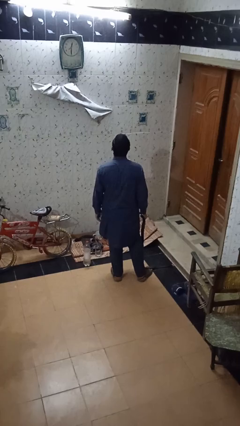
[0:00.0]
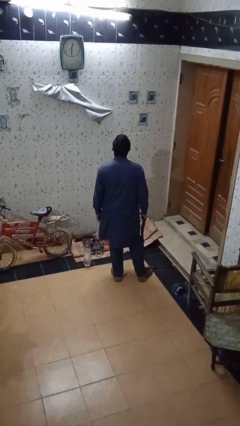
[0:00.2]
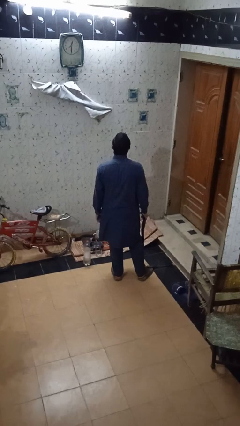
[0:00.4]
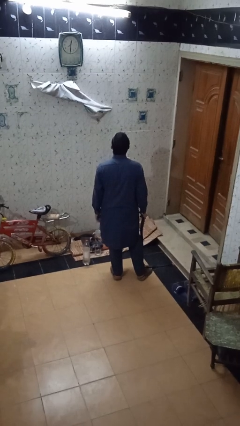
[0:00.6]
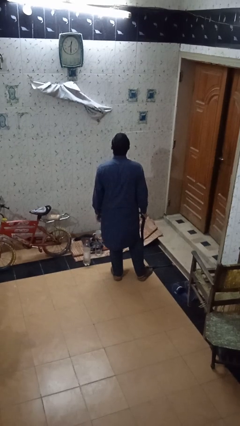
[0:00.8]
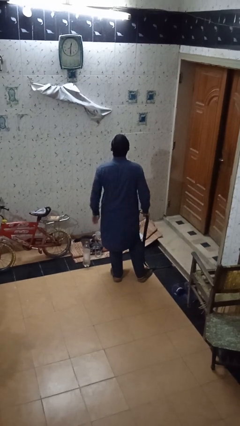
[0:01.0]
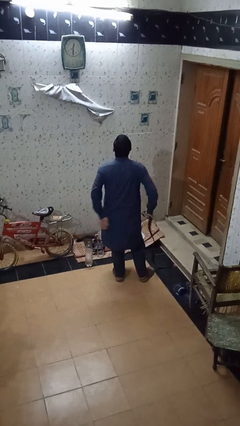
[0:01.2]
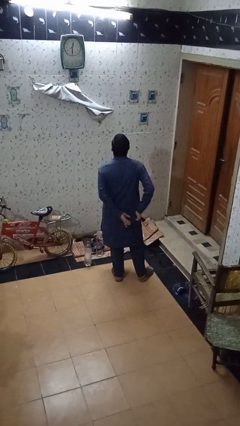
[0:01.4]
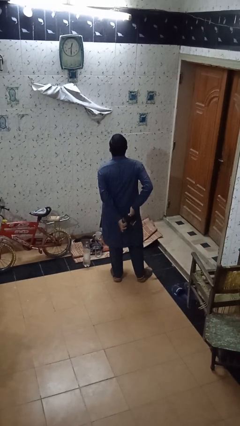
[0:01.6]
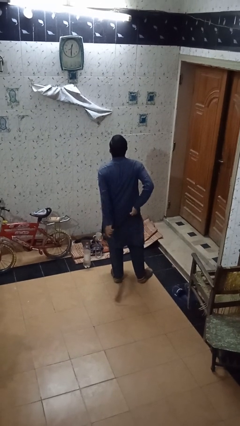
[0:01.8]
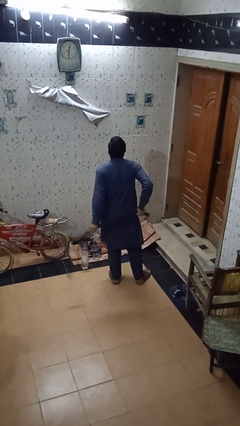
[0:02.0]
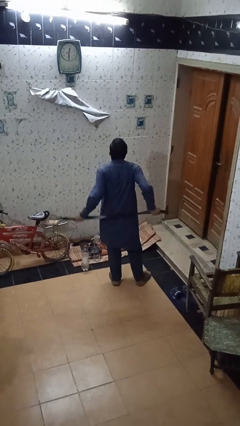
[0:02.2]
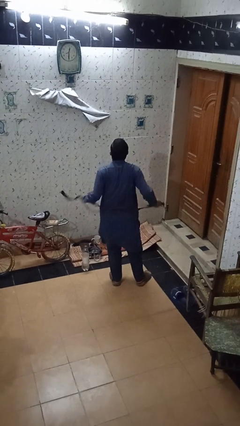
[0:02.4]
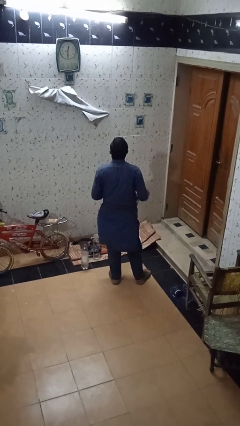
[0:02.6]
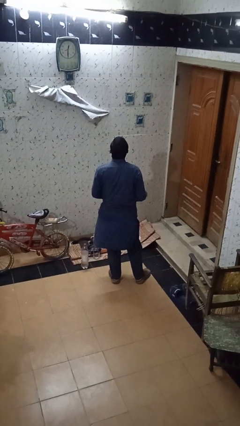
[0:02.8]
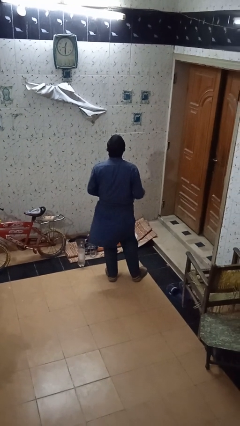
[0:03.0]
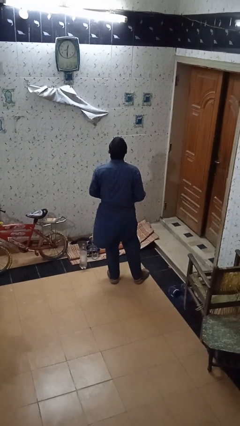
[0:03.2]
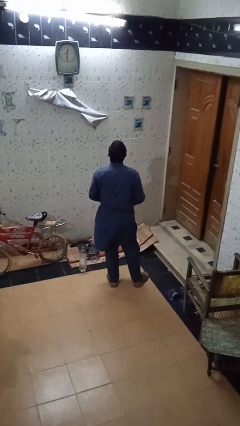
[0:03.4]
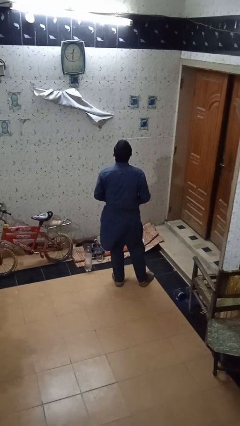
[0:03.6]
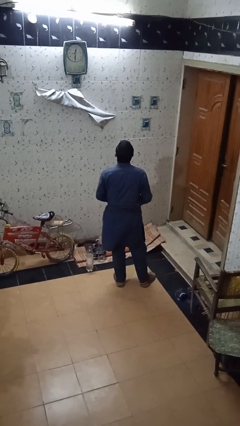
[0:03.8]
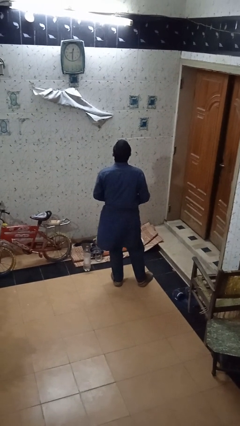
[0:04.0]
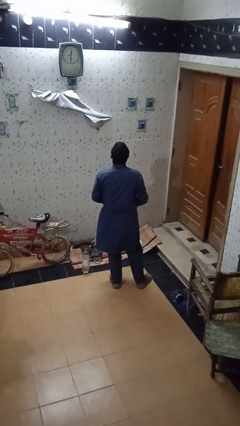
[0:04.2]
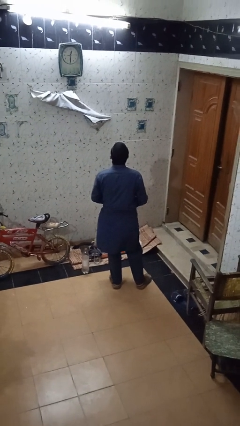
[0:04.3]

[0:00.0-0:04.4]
person puts on belt

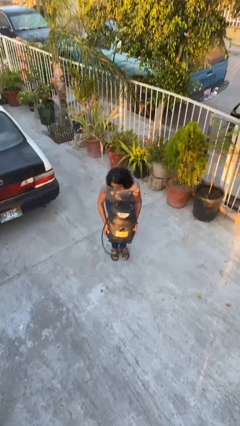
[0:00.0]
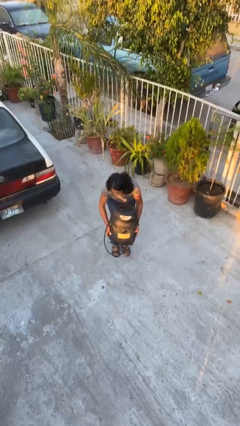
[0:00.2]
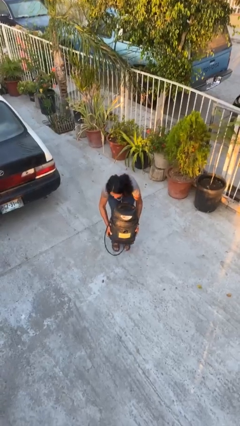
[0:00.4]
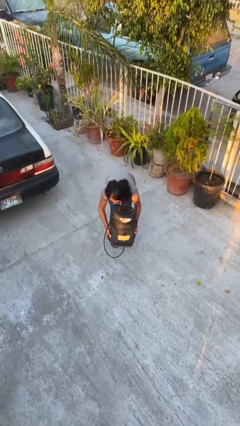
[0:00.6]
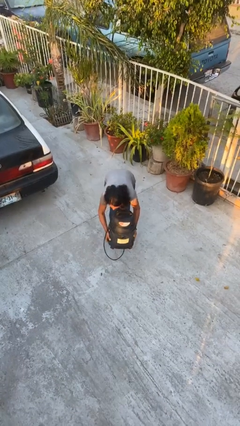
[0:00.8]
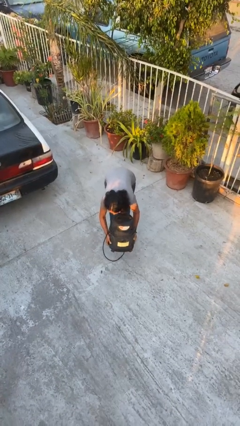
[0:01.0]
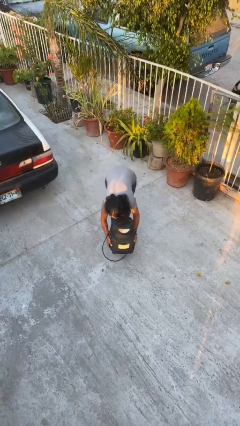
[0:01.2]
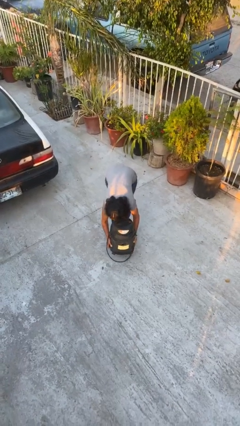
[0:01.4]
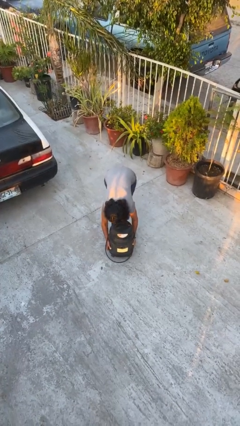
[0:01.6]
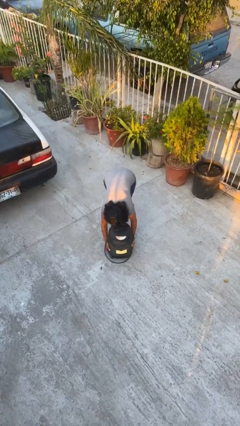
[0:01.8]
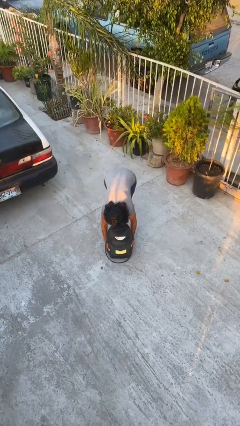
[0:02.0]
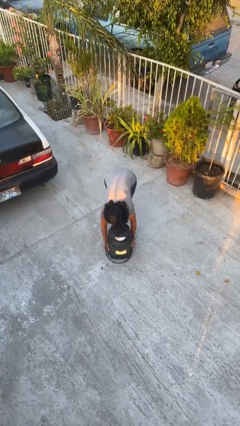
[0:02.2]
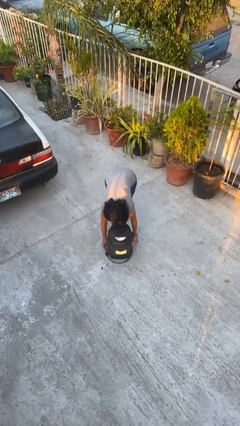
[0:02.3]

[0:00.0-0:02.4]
person puts down object on floor

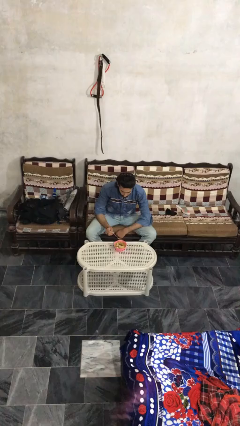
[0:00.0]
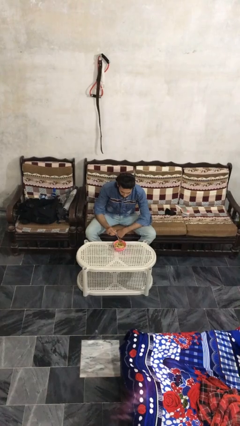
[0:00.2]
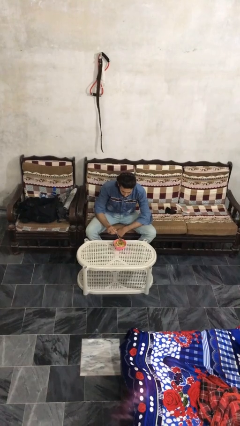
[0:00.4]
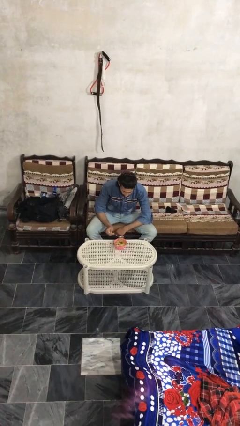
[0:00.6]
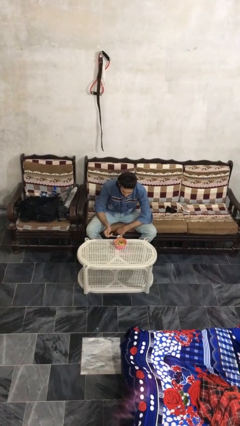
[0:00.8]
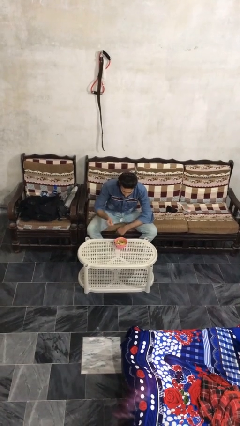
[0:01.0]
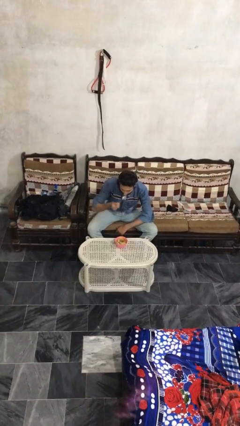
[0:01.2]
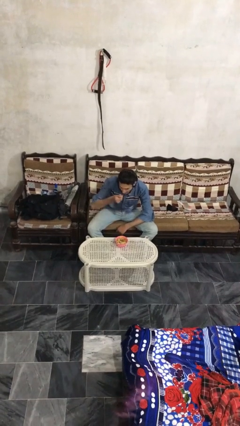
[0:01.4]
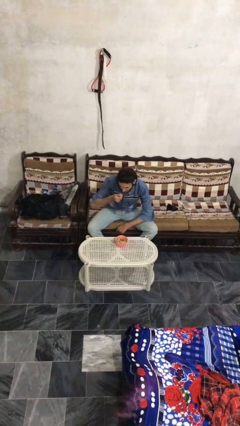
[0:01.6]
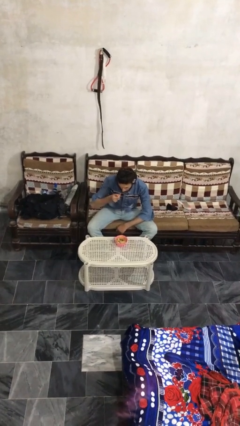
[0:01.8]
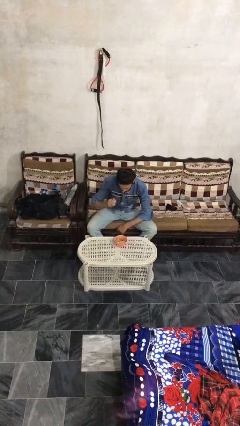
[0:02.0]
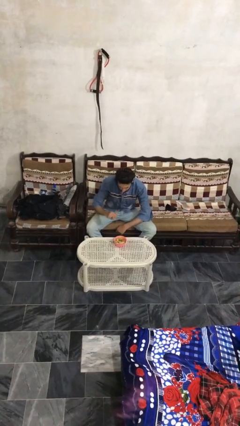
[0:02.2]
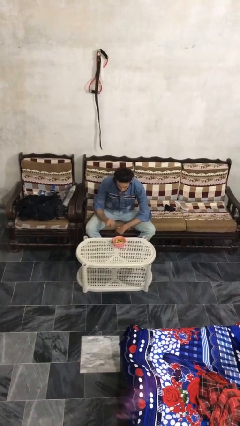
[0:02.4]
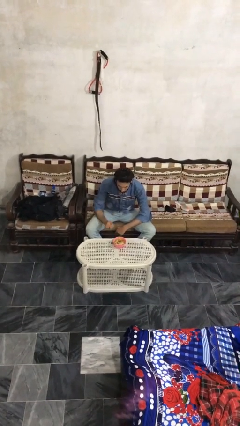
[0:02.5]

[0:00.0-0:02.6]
person eats with utensil

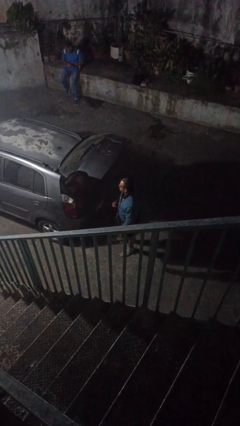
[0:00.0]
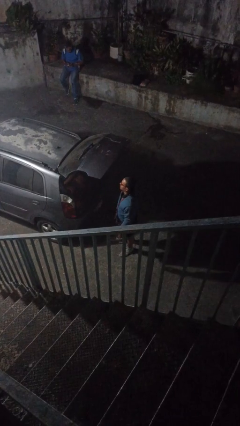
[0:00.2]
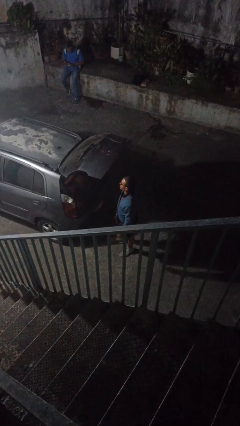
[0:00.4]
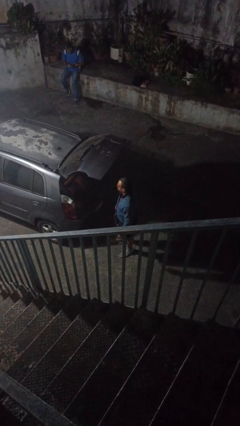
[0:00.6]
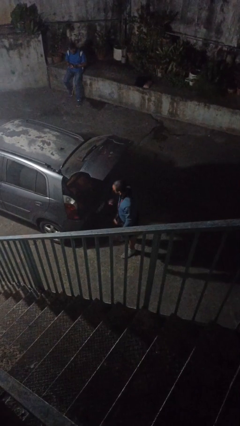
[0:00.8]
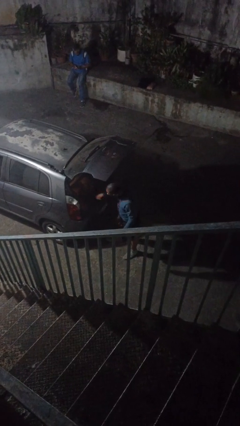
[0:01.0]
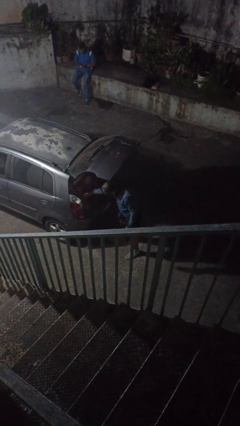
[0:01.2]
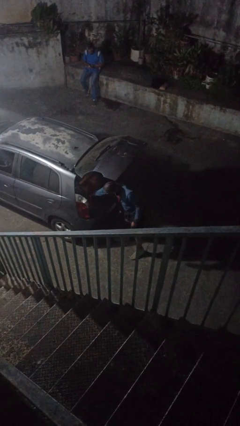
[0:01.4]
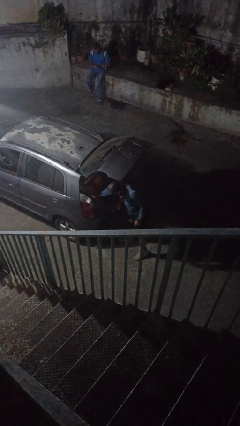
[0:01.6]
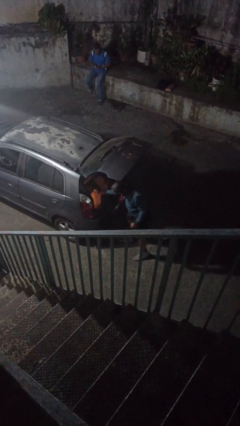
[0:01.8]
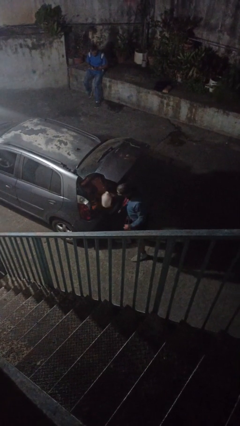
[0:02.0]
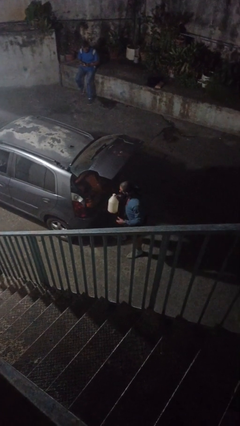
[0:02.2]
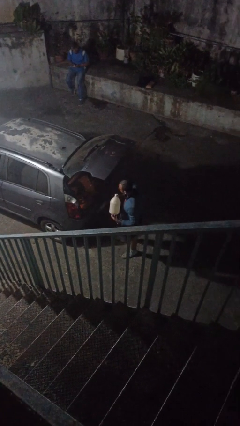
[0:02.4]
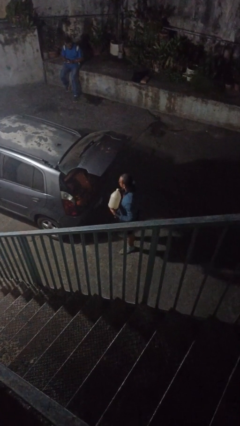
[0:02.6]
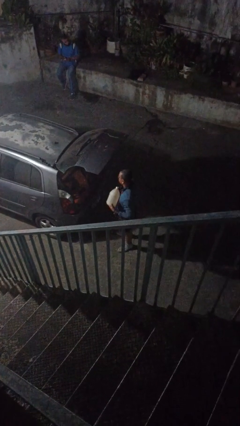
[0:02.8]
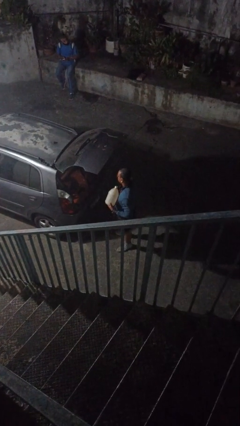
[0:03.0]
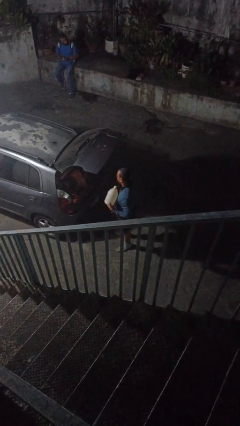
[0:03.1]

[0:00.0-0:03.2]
person unloads car

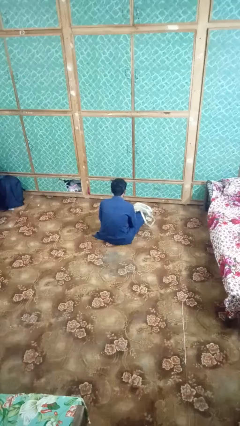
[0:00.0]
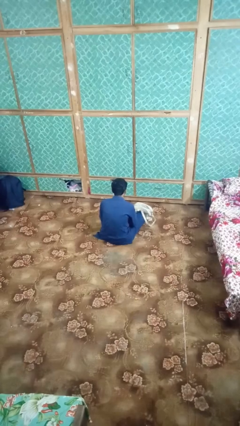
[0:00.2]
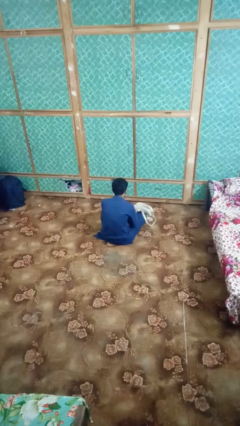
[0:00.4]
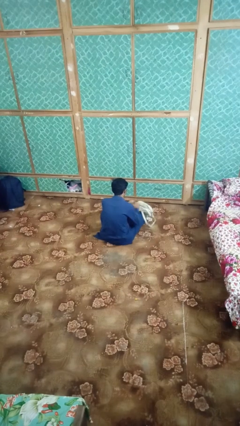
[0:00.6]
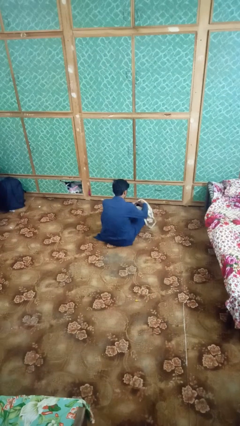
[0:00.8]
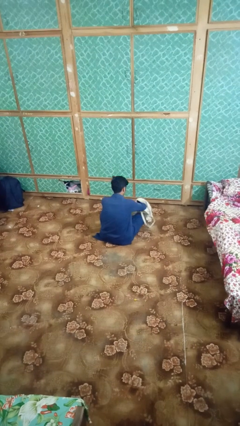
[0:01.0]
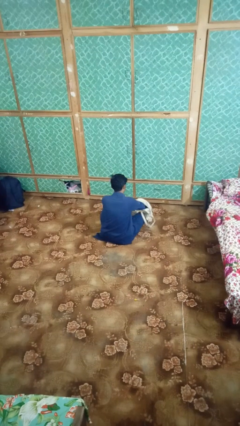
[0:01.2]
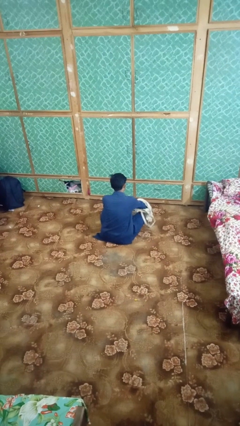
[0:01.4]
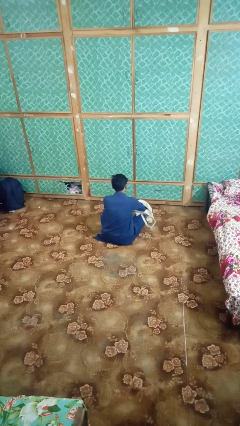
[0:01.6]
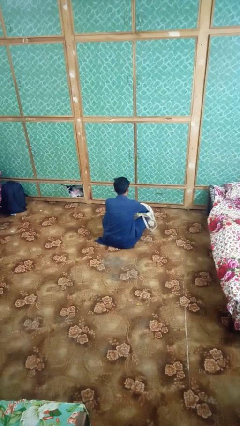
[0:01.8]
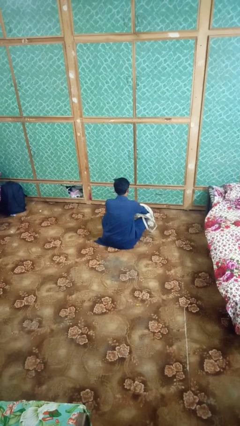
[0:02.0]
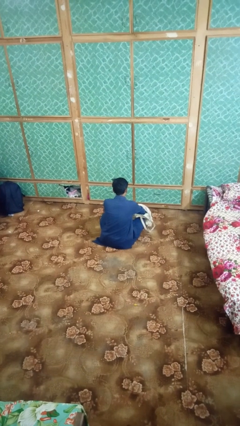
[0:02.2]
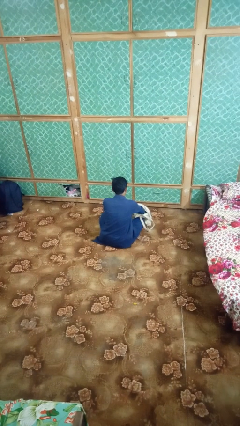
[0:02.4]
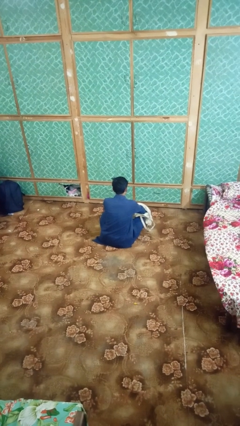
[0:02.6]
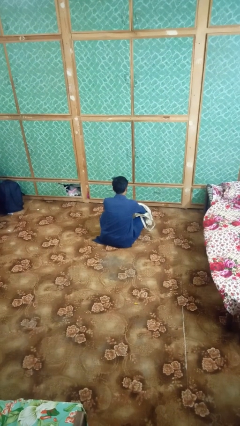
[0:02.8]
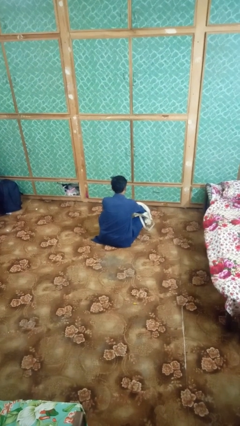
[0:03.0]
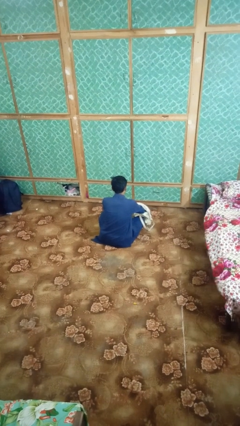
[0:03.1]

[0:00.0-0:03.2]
person searches in bag

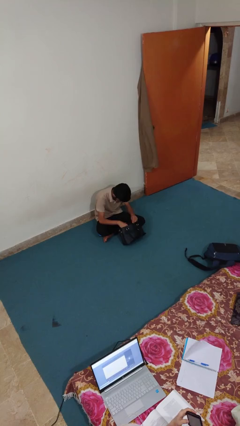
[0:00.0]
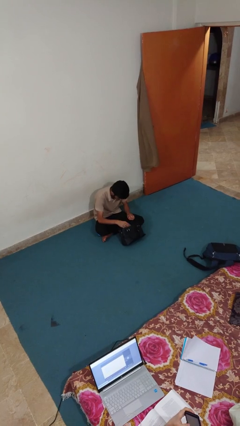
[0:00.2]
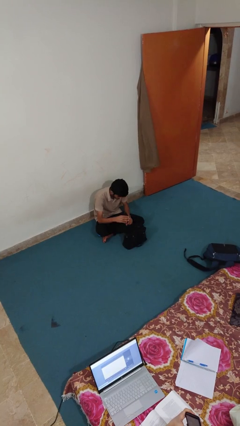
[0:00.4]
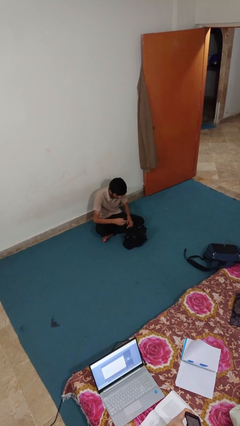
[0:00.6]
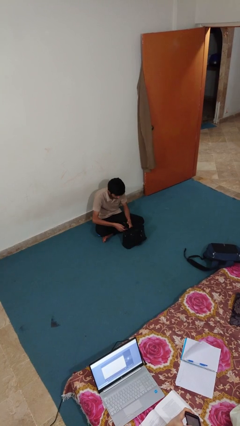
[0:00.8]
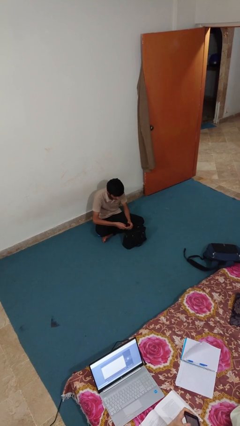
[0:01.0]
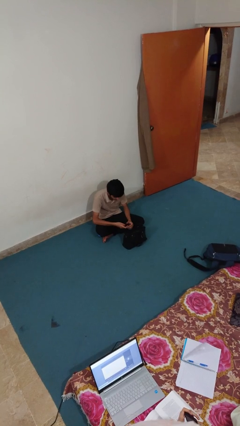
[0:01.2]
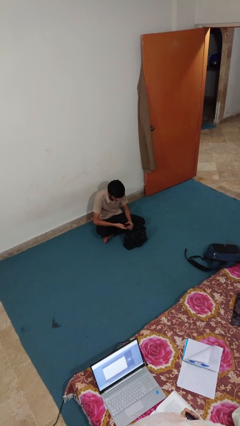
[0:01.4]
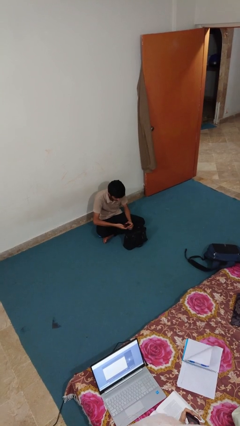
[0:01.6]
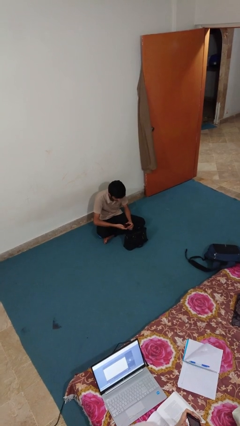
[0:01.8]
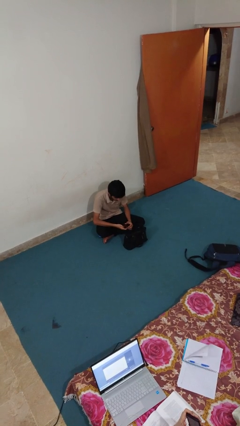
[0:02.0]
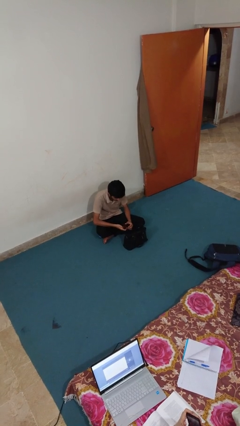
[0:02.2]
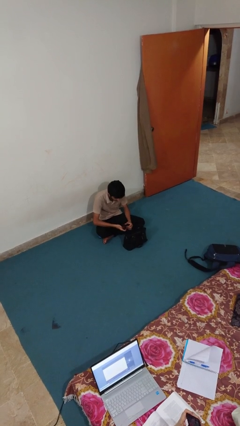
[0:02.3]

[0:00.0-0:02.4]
person takes object from purse
